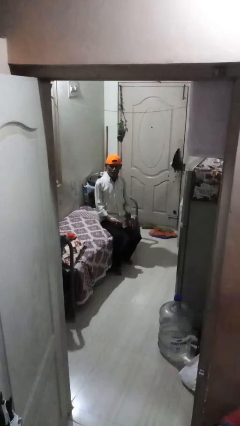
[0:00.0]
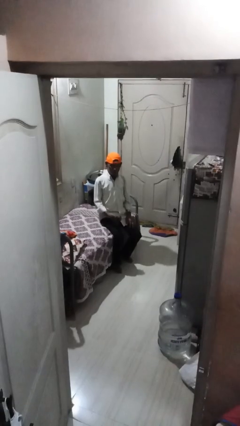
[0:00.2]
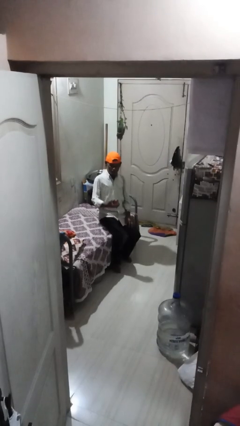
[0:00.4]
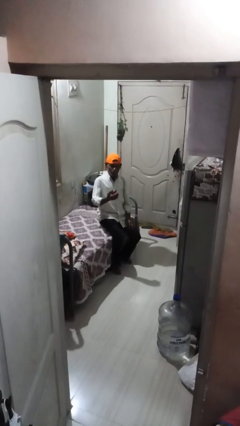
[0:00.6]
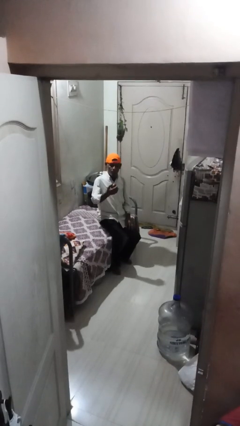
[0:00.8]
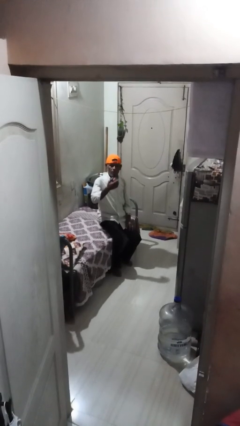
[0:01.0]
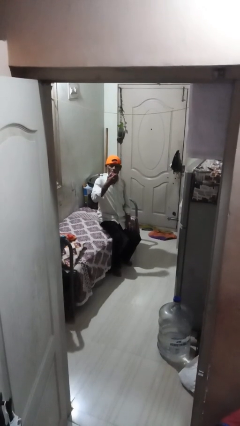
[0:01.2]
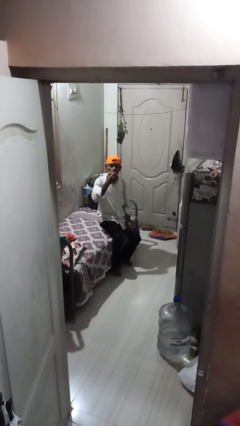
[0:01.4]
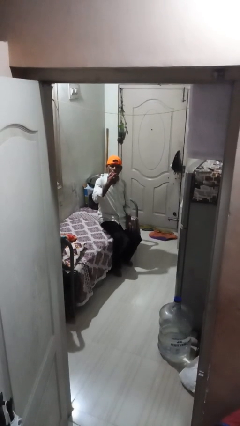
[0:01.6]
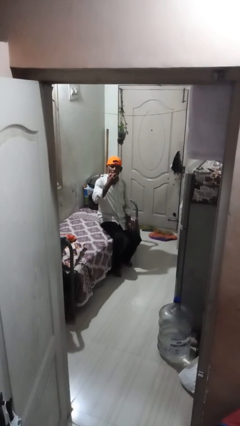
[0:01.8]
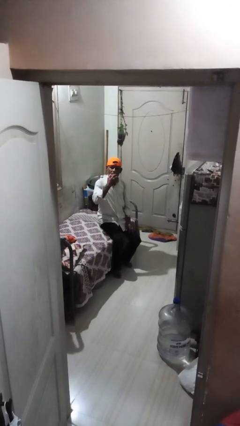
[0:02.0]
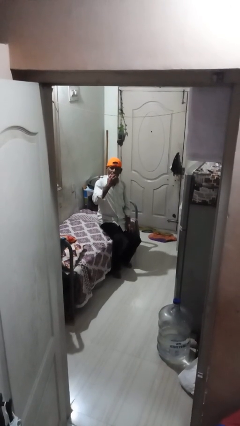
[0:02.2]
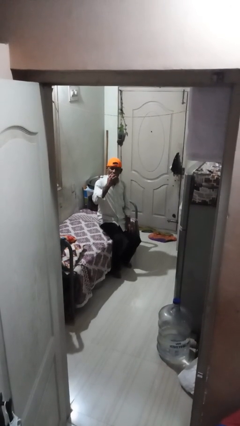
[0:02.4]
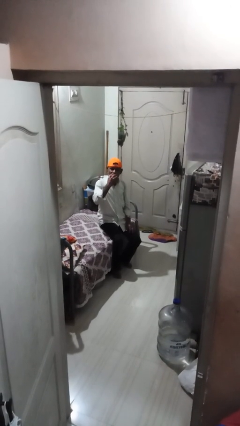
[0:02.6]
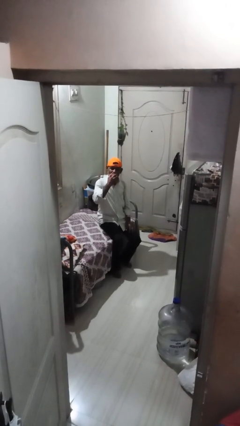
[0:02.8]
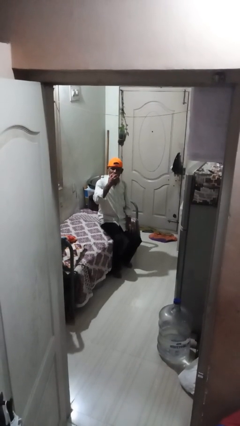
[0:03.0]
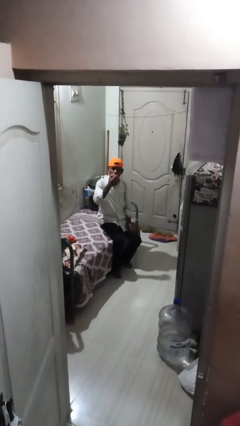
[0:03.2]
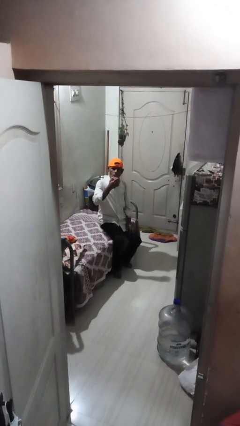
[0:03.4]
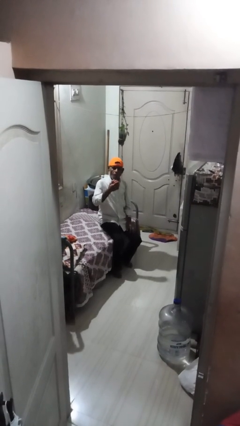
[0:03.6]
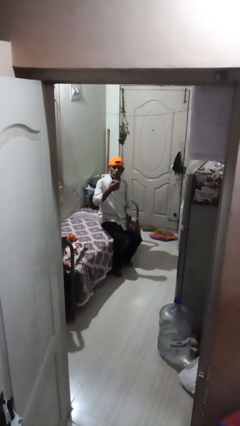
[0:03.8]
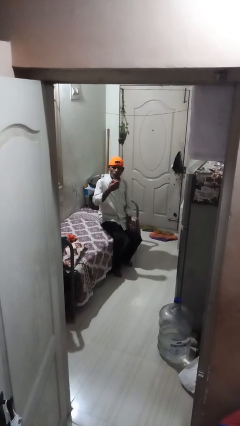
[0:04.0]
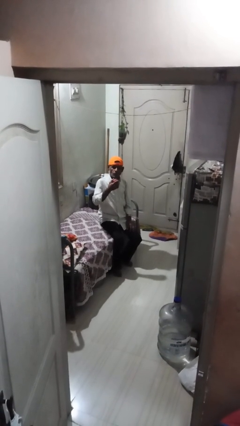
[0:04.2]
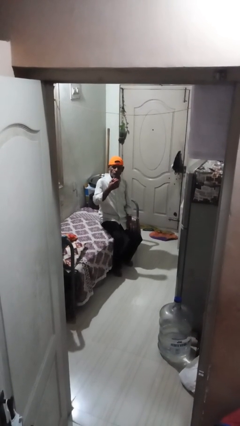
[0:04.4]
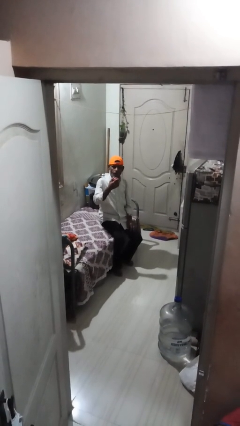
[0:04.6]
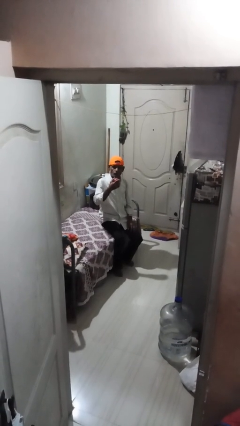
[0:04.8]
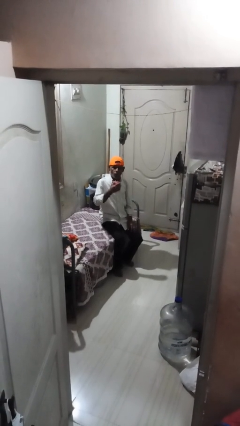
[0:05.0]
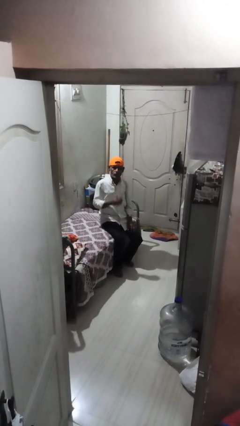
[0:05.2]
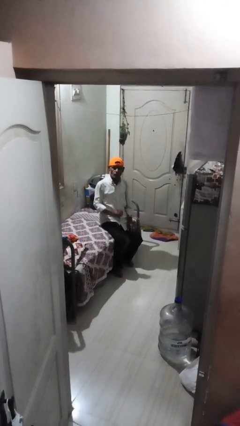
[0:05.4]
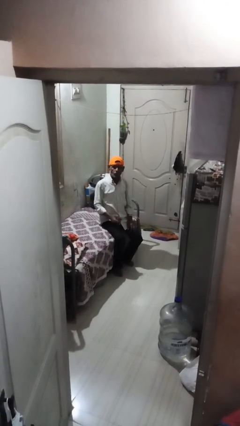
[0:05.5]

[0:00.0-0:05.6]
person eats apple

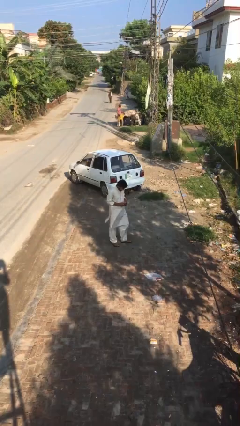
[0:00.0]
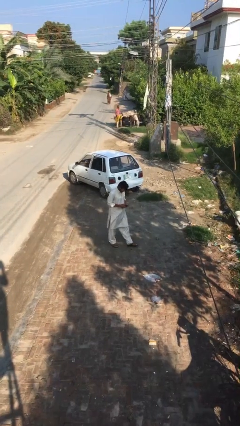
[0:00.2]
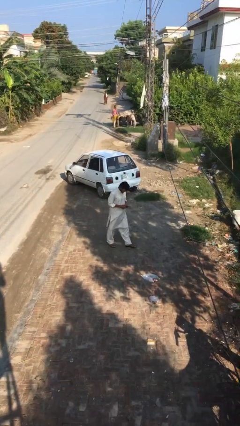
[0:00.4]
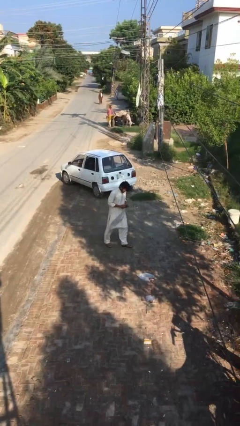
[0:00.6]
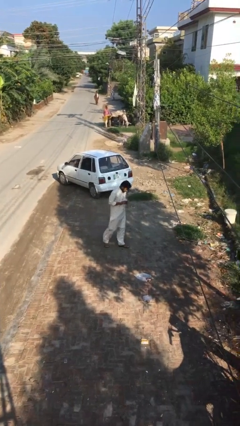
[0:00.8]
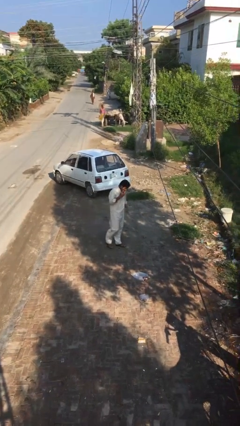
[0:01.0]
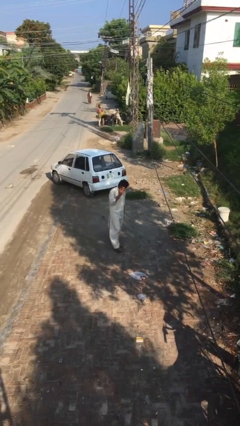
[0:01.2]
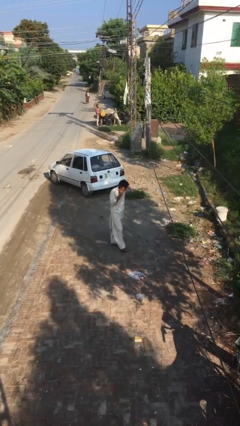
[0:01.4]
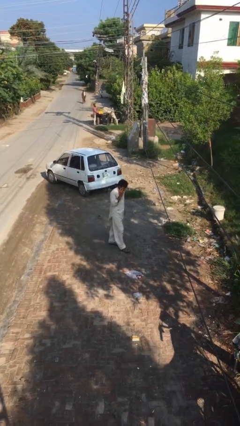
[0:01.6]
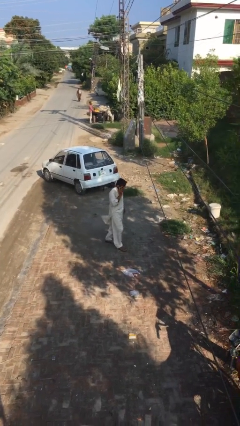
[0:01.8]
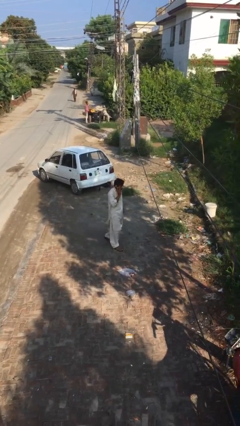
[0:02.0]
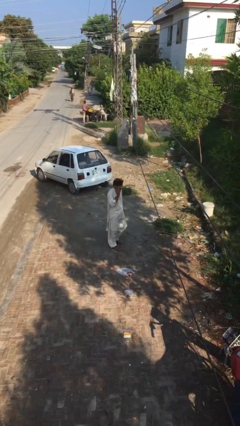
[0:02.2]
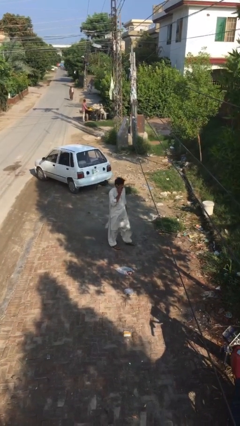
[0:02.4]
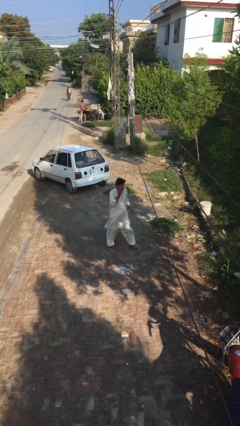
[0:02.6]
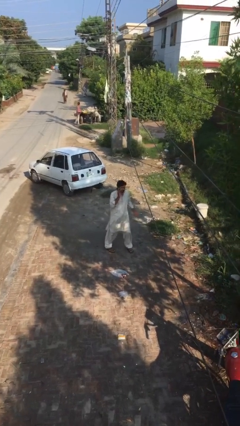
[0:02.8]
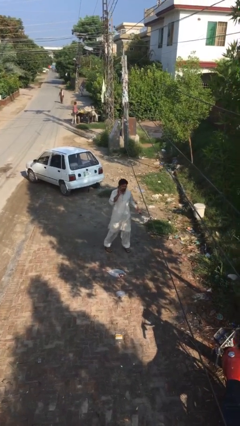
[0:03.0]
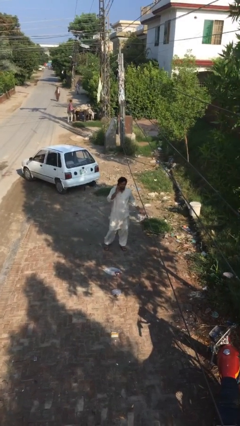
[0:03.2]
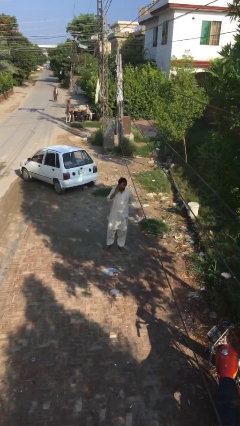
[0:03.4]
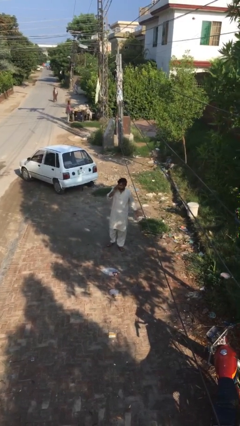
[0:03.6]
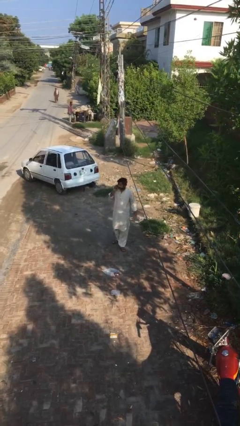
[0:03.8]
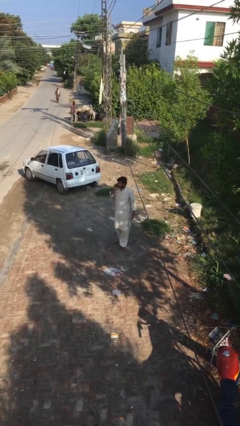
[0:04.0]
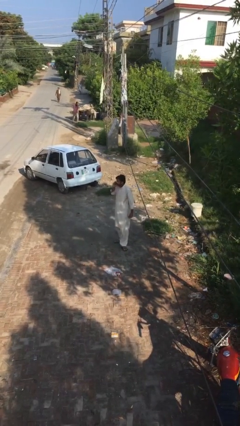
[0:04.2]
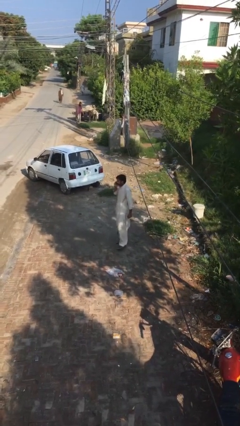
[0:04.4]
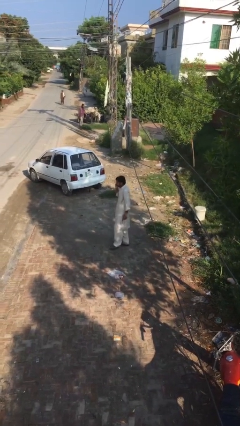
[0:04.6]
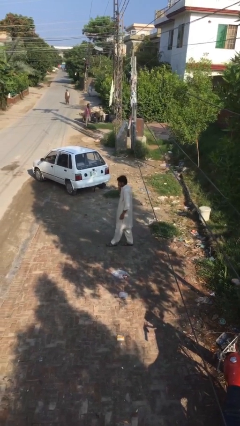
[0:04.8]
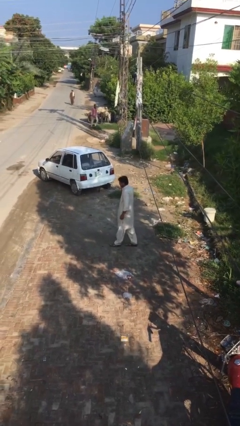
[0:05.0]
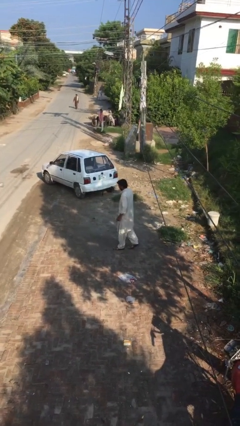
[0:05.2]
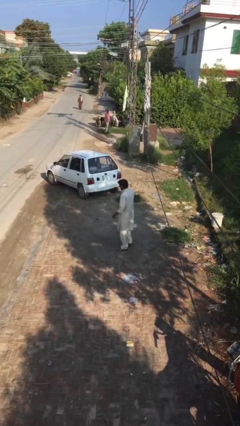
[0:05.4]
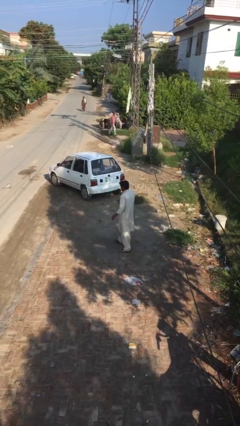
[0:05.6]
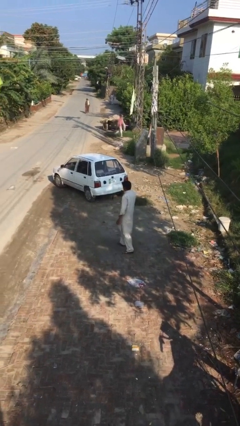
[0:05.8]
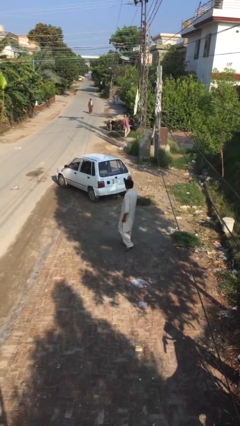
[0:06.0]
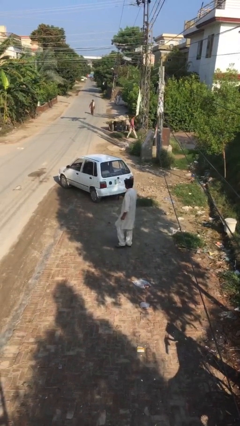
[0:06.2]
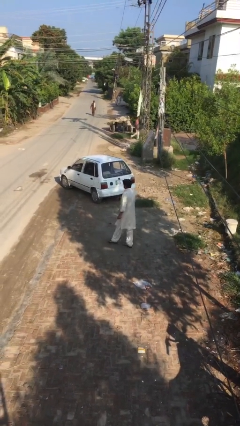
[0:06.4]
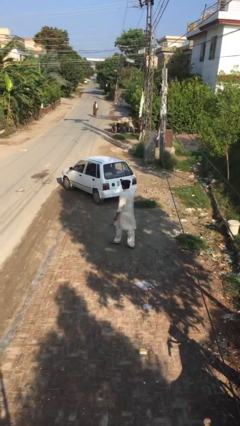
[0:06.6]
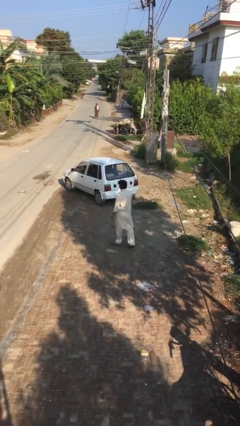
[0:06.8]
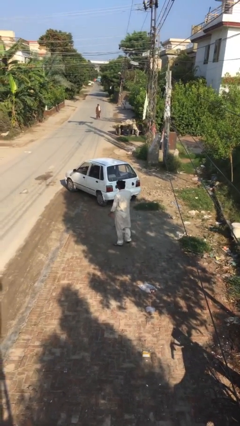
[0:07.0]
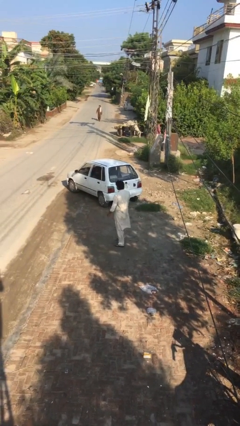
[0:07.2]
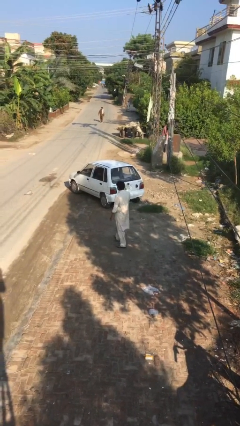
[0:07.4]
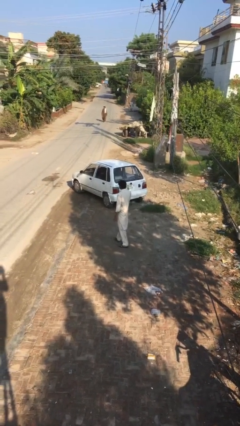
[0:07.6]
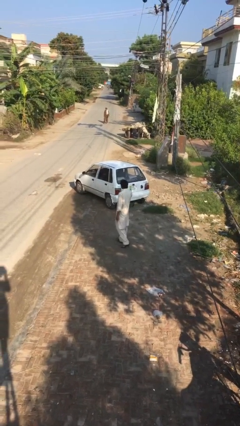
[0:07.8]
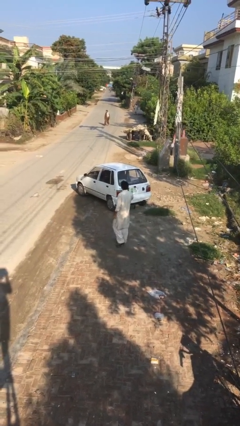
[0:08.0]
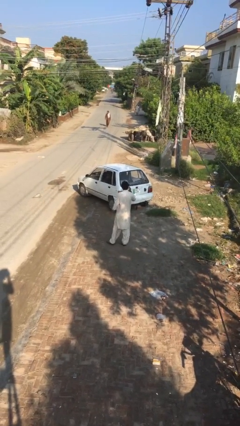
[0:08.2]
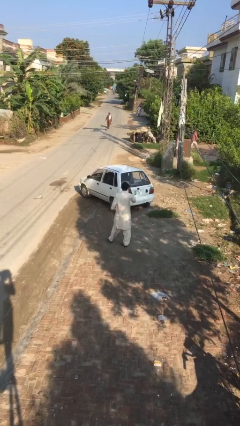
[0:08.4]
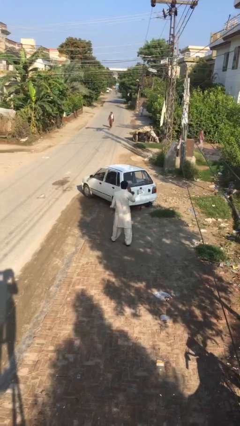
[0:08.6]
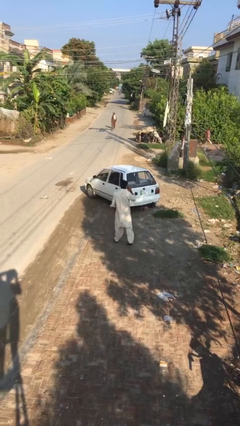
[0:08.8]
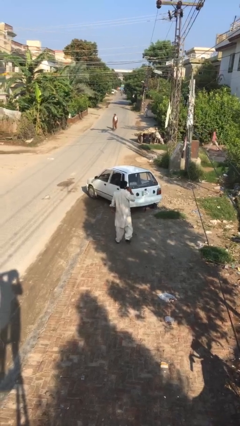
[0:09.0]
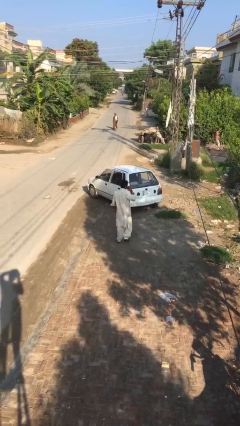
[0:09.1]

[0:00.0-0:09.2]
person talks on phone

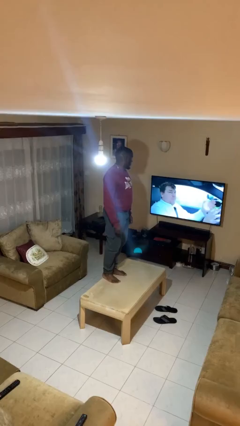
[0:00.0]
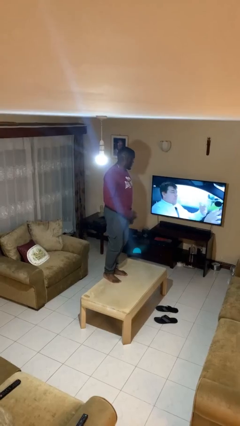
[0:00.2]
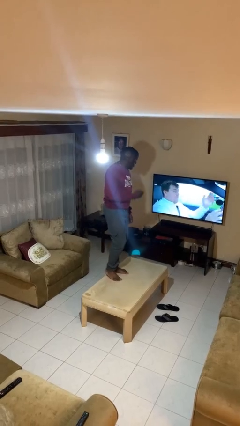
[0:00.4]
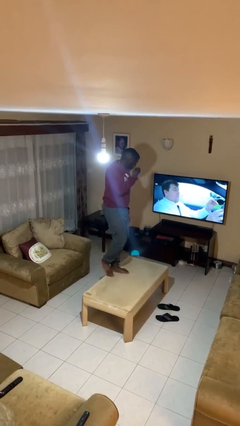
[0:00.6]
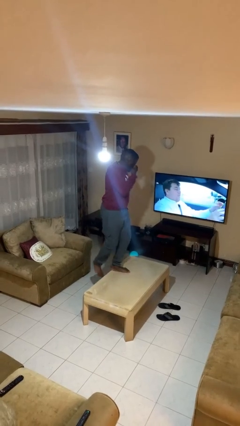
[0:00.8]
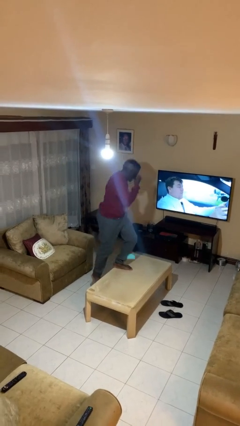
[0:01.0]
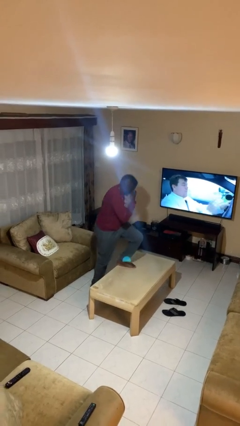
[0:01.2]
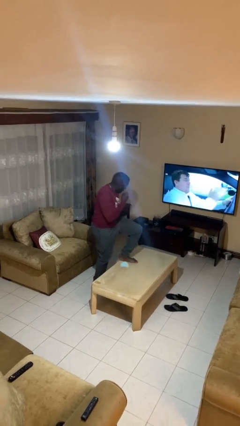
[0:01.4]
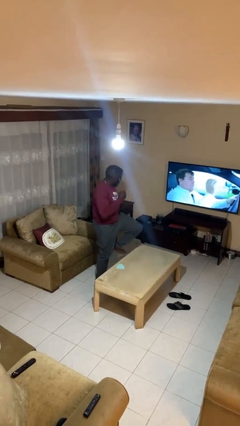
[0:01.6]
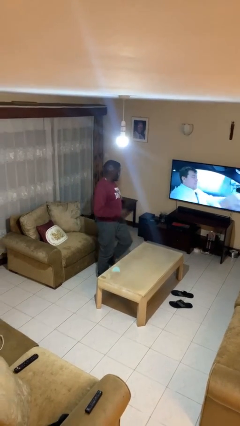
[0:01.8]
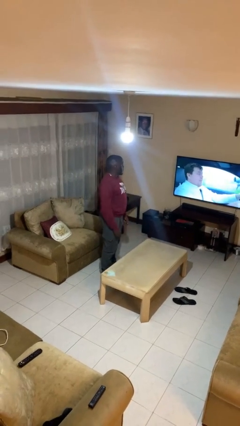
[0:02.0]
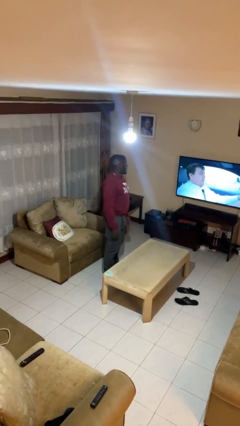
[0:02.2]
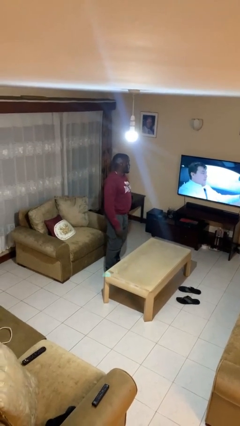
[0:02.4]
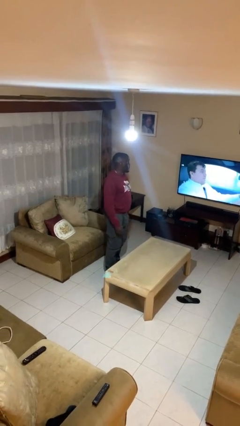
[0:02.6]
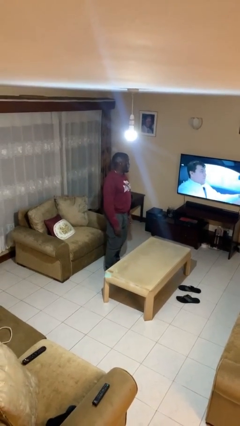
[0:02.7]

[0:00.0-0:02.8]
person climbs off table

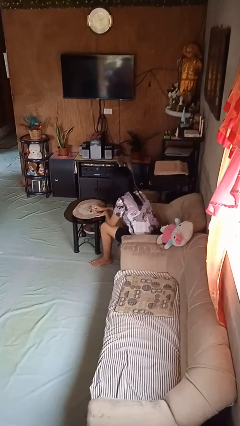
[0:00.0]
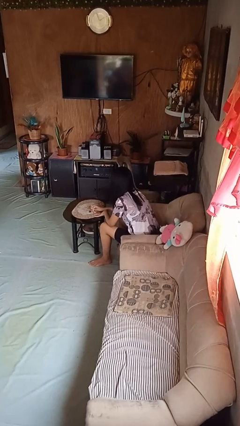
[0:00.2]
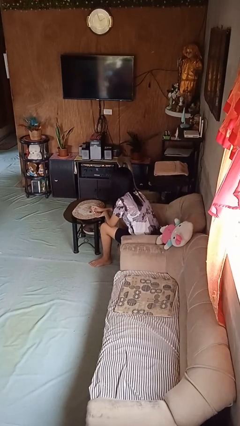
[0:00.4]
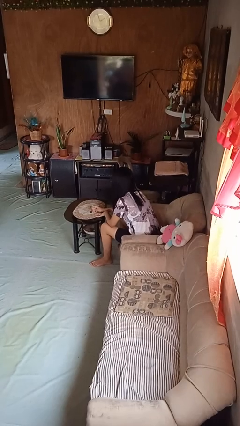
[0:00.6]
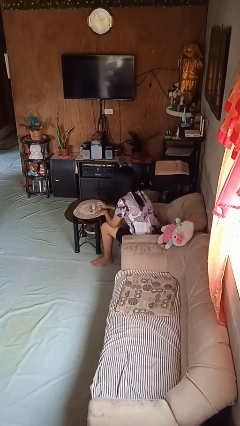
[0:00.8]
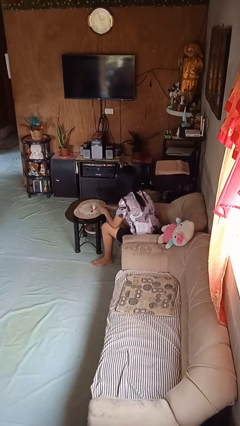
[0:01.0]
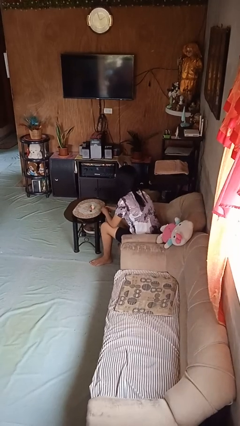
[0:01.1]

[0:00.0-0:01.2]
person paints fingernails
